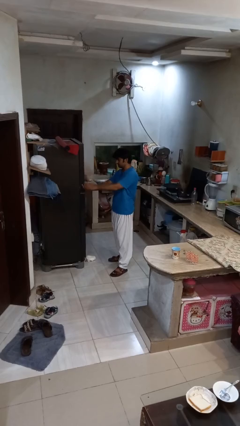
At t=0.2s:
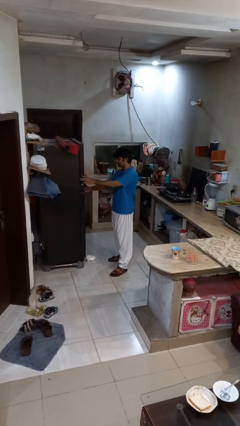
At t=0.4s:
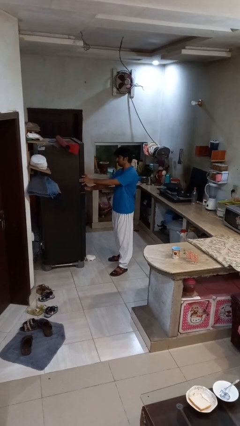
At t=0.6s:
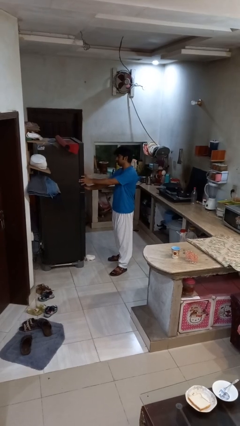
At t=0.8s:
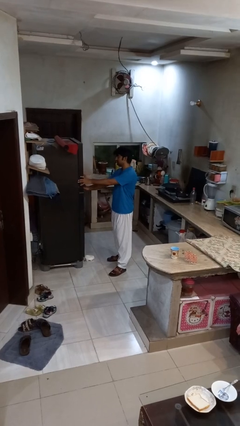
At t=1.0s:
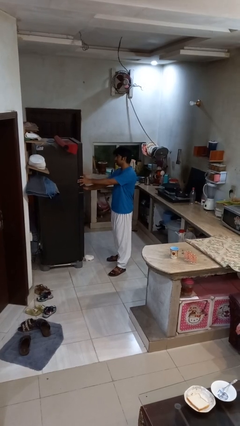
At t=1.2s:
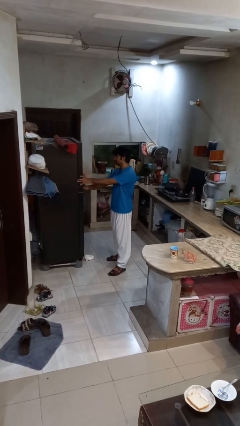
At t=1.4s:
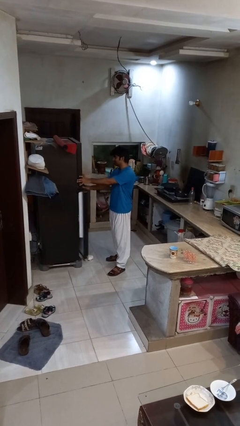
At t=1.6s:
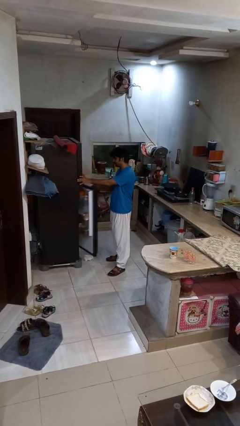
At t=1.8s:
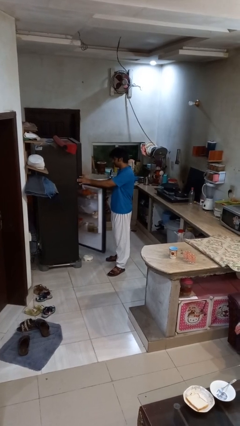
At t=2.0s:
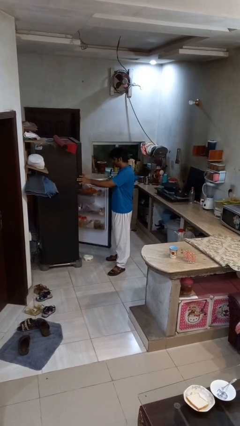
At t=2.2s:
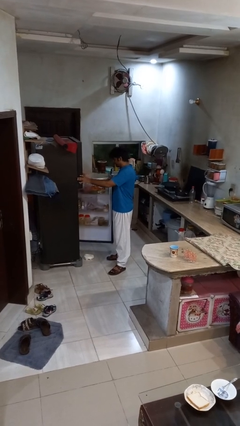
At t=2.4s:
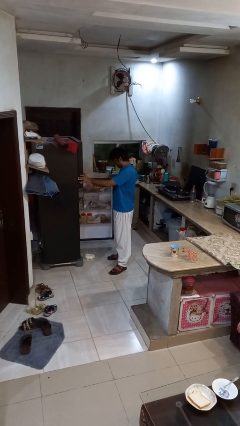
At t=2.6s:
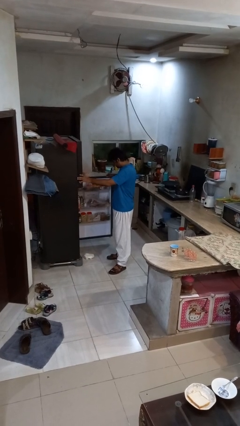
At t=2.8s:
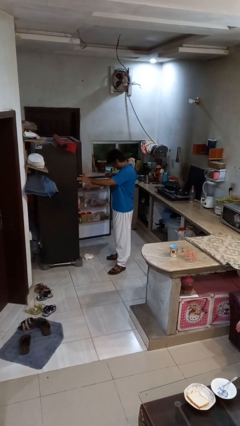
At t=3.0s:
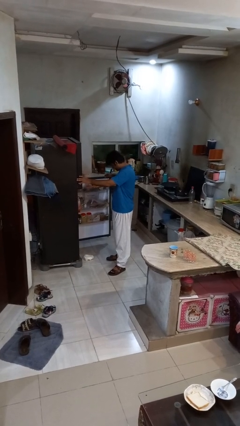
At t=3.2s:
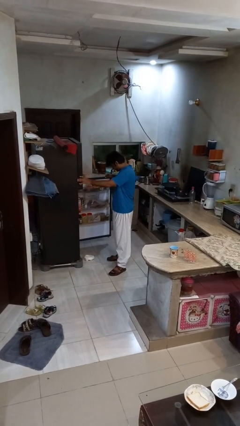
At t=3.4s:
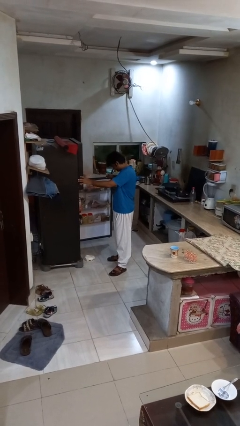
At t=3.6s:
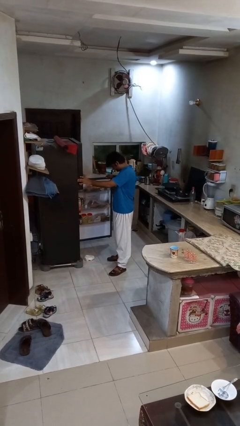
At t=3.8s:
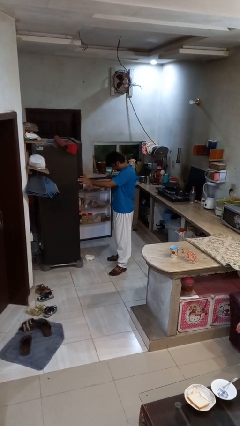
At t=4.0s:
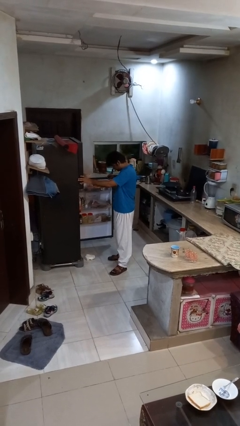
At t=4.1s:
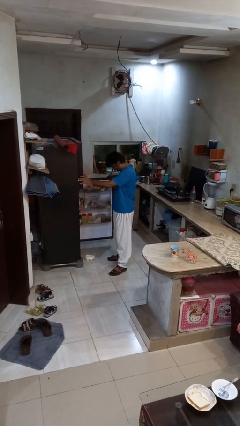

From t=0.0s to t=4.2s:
person opens refrigerator

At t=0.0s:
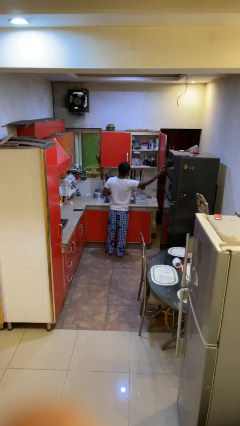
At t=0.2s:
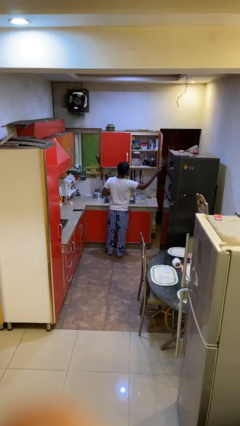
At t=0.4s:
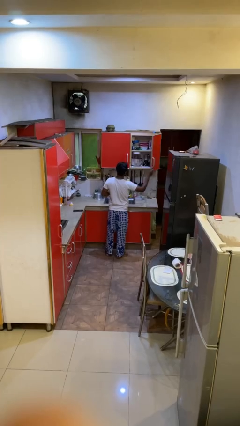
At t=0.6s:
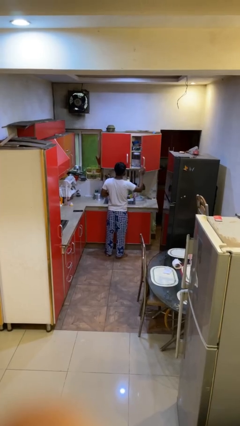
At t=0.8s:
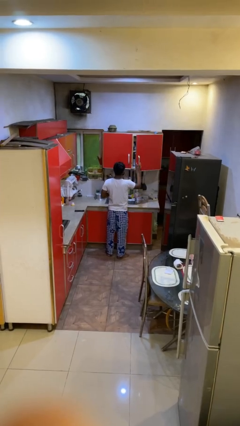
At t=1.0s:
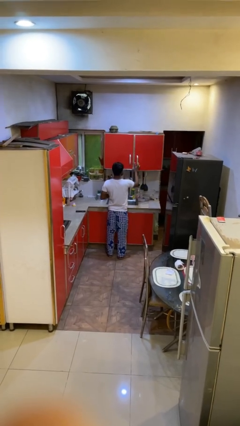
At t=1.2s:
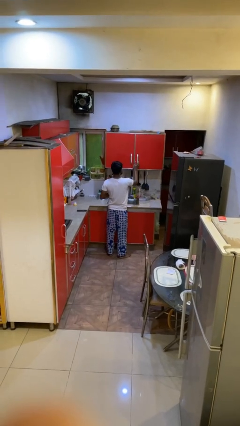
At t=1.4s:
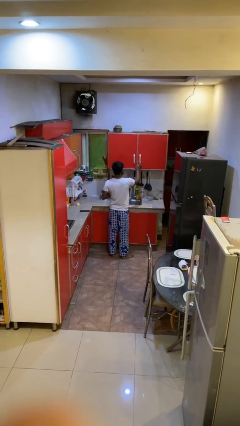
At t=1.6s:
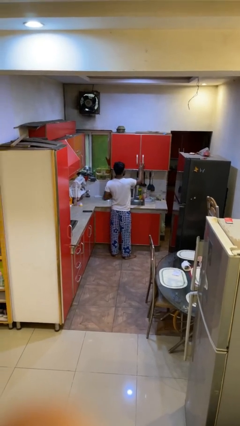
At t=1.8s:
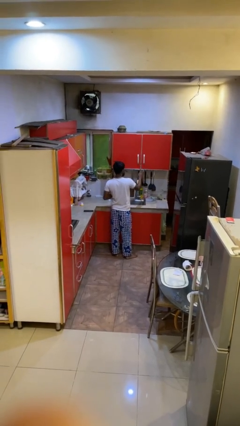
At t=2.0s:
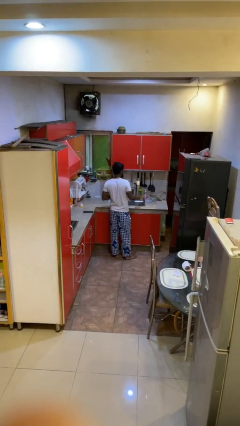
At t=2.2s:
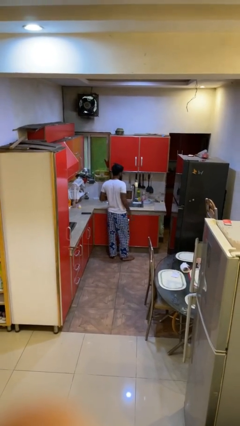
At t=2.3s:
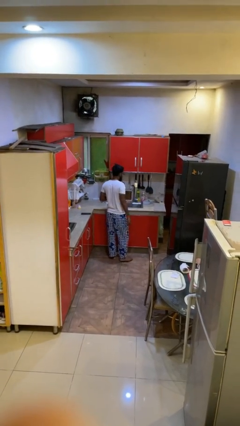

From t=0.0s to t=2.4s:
person closes cabinet

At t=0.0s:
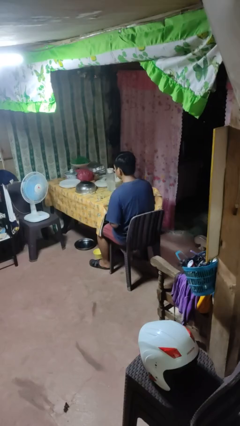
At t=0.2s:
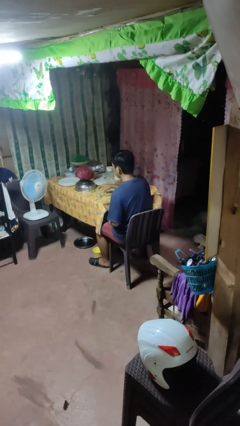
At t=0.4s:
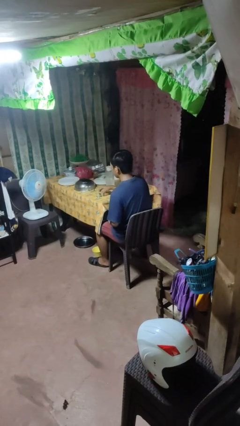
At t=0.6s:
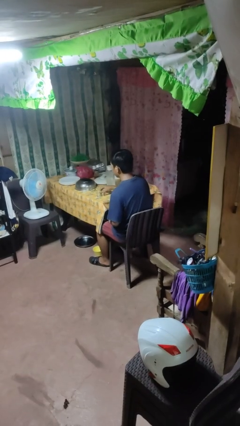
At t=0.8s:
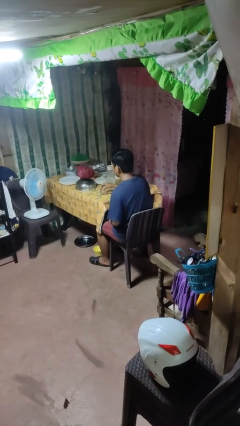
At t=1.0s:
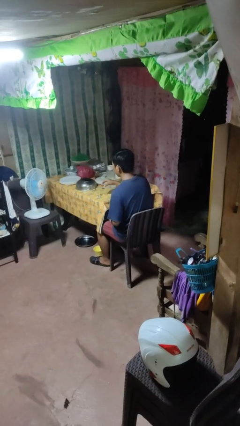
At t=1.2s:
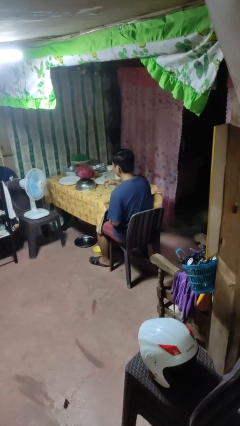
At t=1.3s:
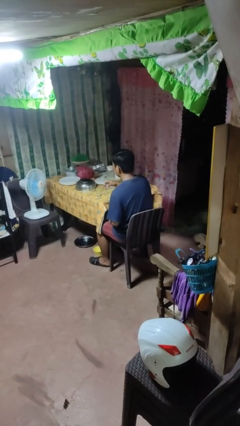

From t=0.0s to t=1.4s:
person picks up object from table

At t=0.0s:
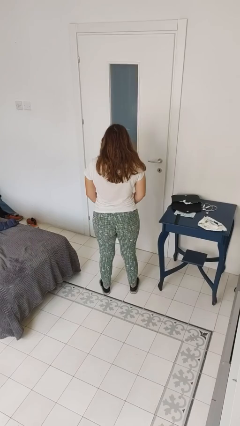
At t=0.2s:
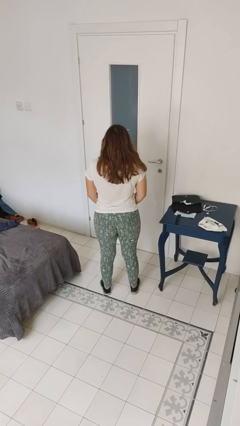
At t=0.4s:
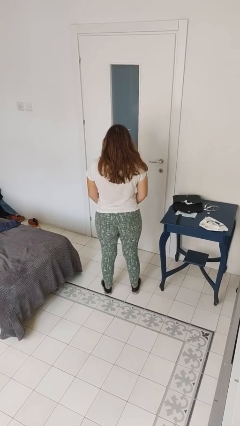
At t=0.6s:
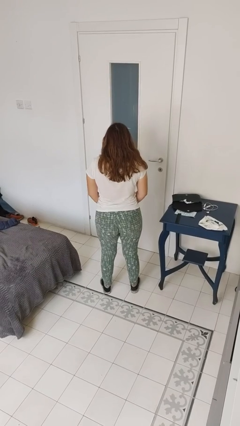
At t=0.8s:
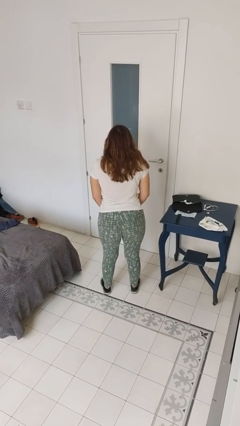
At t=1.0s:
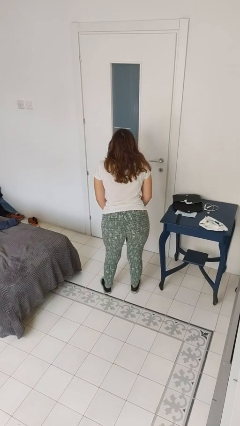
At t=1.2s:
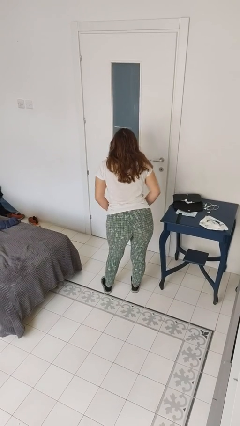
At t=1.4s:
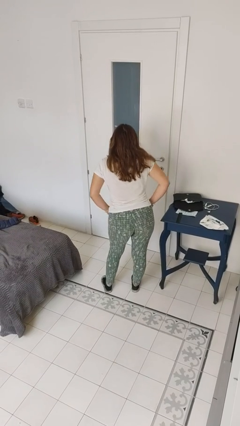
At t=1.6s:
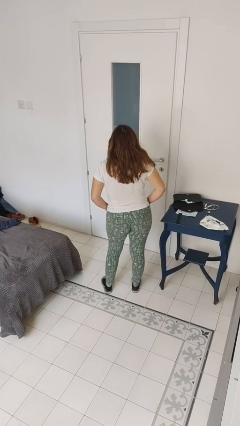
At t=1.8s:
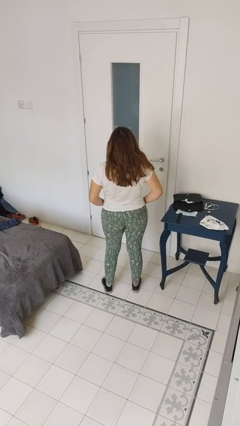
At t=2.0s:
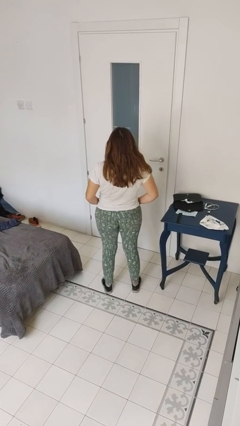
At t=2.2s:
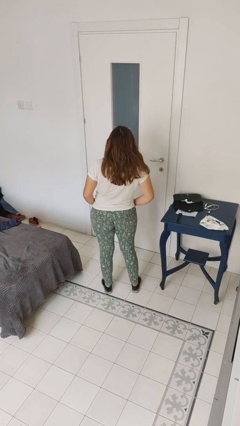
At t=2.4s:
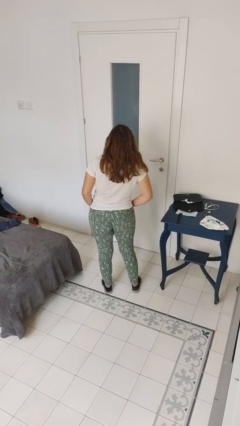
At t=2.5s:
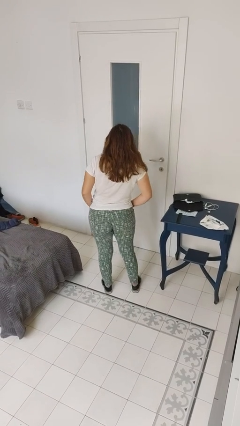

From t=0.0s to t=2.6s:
person wiggles hips

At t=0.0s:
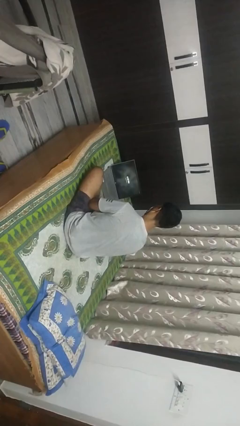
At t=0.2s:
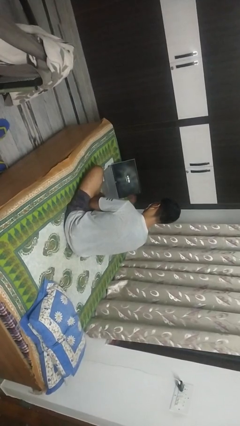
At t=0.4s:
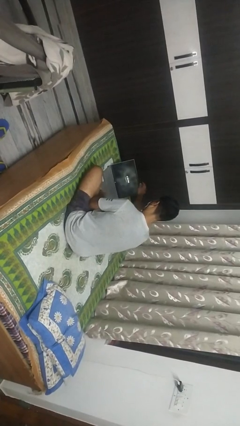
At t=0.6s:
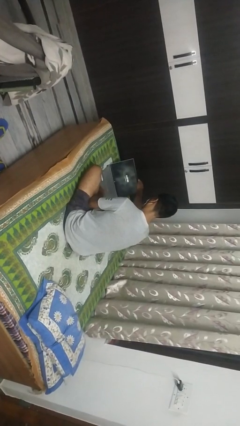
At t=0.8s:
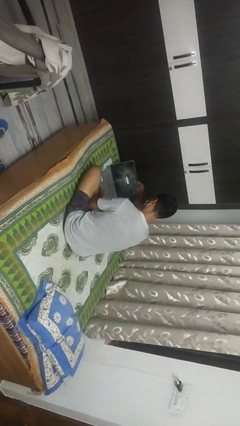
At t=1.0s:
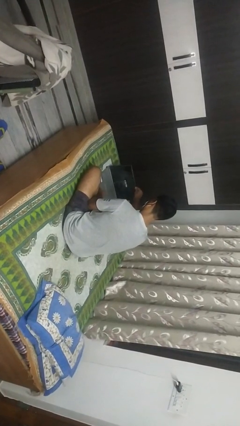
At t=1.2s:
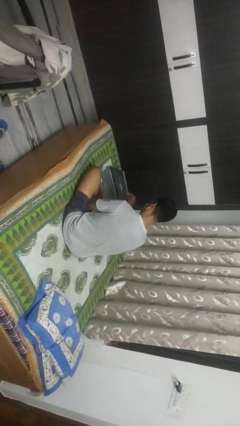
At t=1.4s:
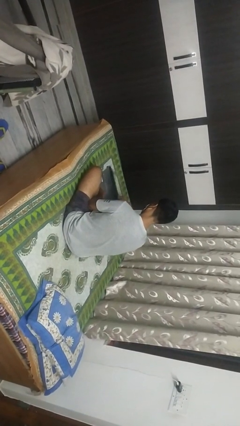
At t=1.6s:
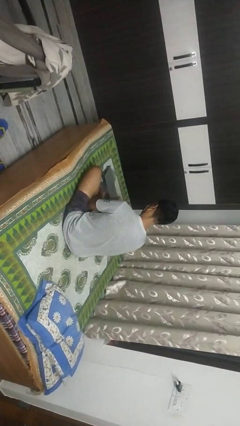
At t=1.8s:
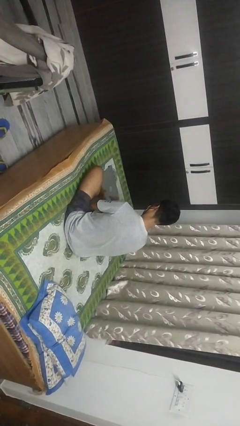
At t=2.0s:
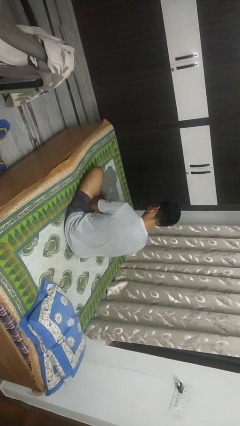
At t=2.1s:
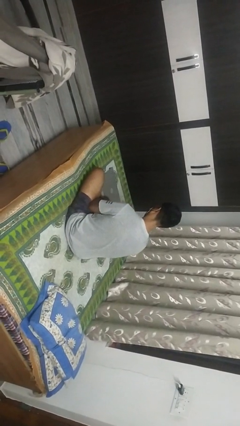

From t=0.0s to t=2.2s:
person closes laptop

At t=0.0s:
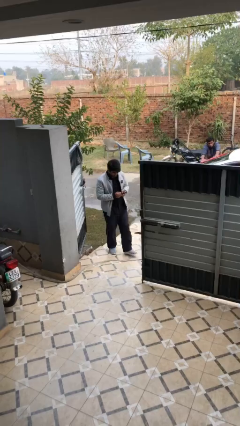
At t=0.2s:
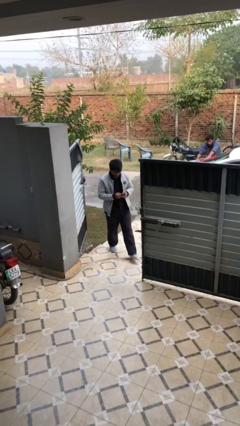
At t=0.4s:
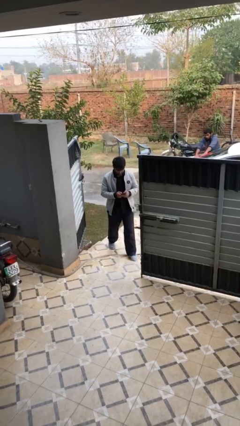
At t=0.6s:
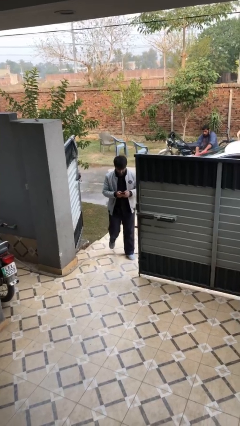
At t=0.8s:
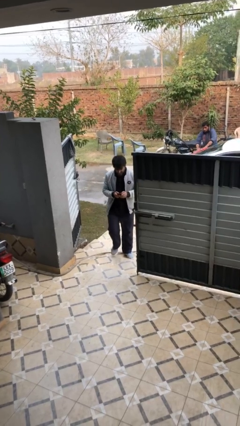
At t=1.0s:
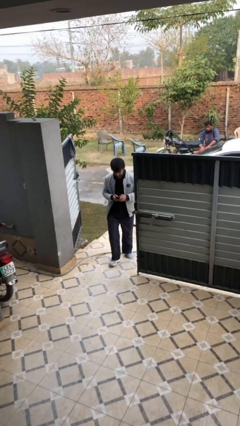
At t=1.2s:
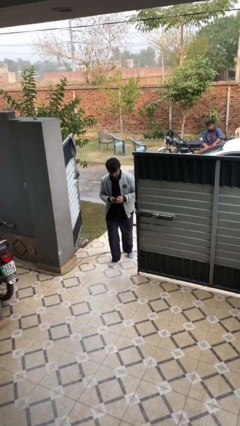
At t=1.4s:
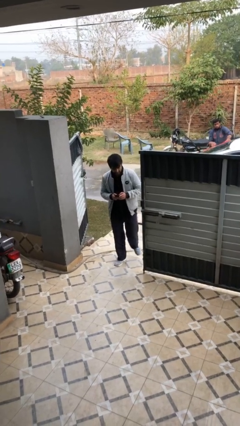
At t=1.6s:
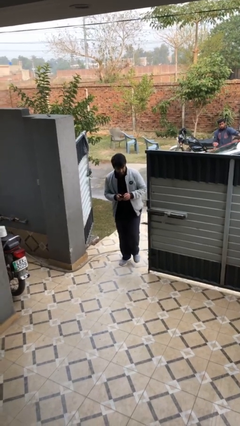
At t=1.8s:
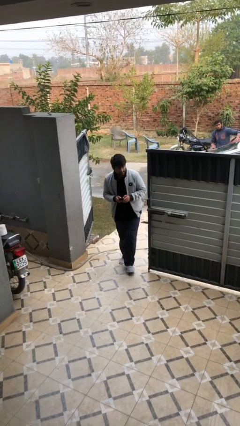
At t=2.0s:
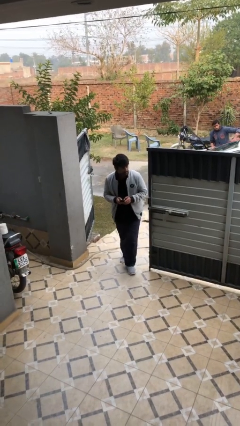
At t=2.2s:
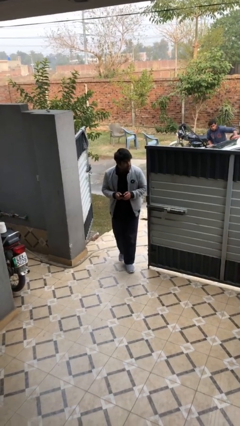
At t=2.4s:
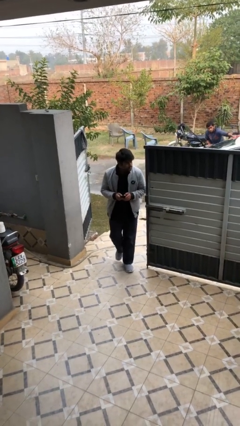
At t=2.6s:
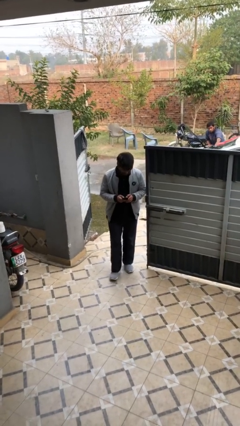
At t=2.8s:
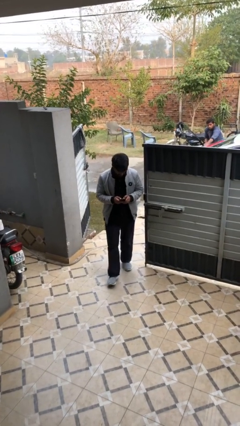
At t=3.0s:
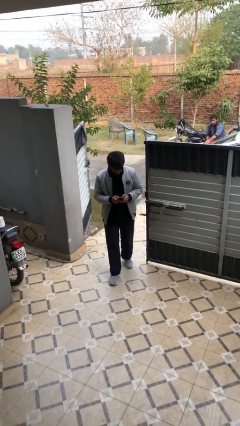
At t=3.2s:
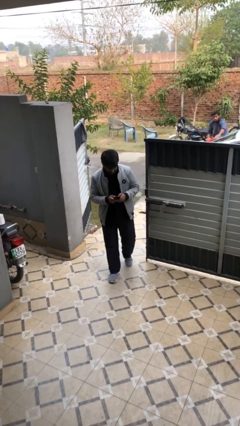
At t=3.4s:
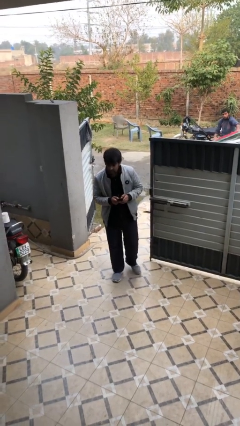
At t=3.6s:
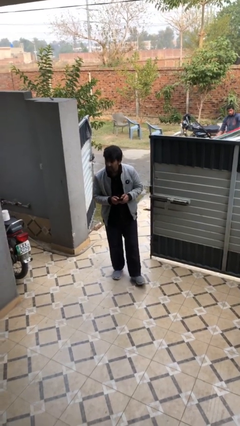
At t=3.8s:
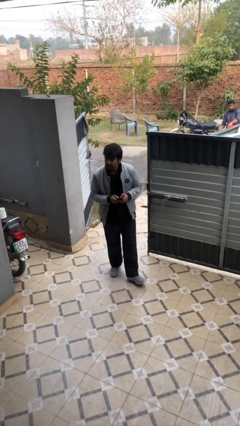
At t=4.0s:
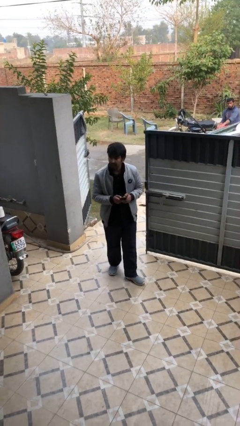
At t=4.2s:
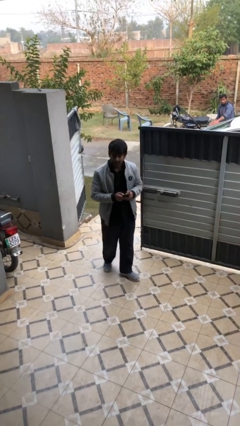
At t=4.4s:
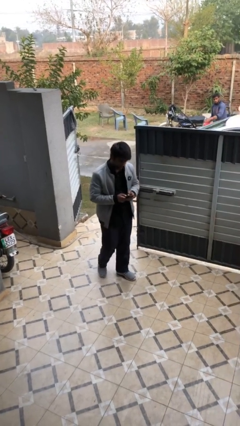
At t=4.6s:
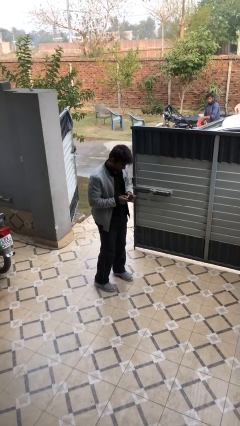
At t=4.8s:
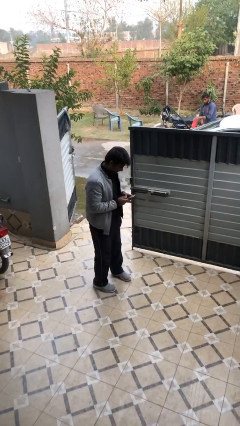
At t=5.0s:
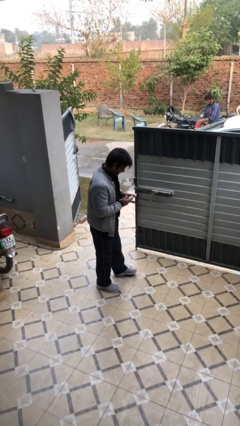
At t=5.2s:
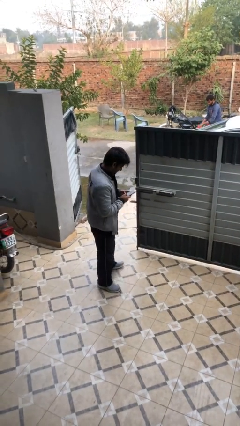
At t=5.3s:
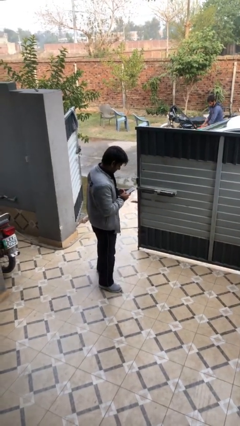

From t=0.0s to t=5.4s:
person enters scene through structure
